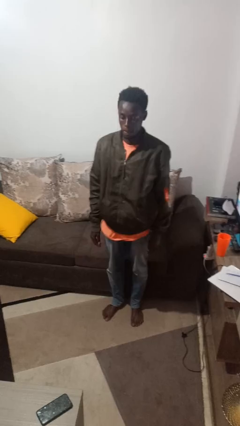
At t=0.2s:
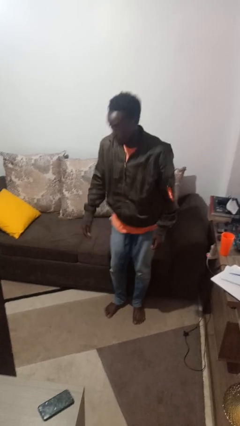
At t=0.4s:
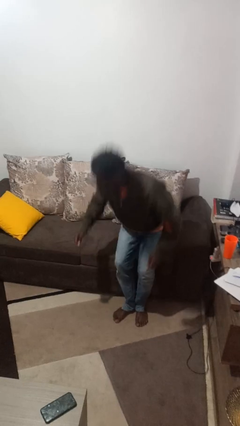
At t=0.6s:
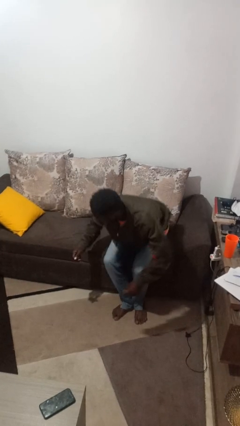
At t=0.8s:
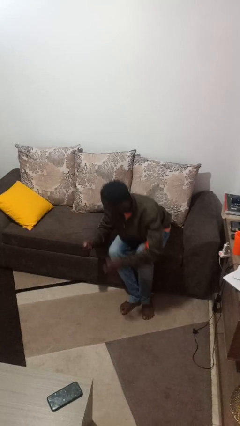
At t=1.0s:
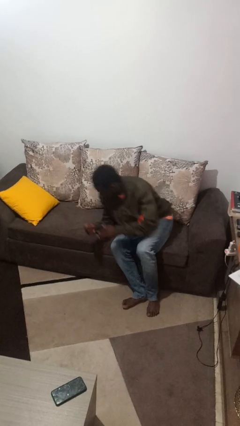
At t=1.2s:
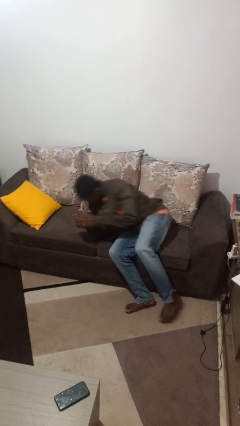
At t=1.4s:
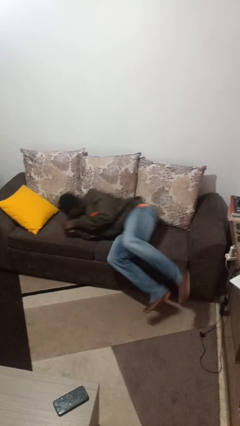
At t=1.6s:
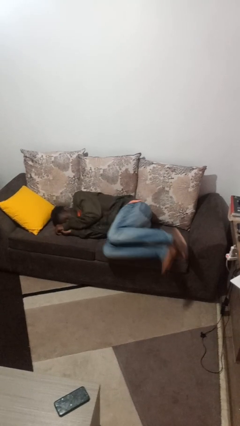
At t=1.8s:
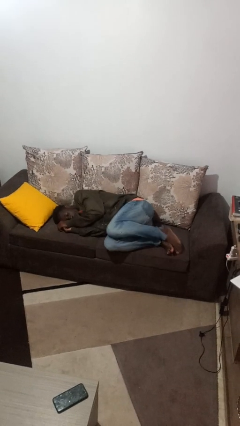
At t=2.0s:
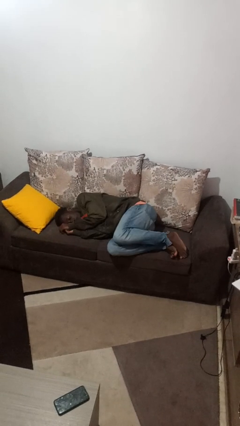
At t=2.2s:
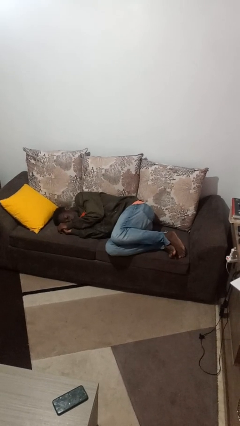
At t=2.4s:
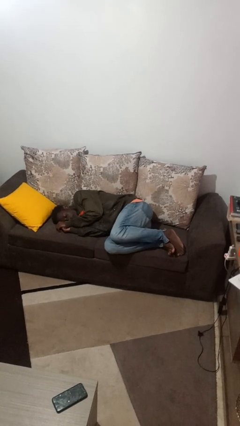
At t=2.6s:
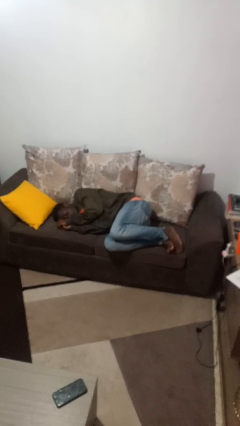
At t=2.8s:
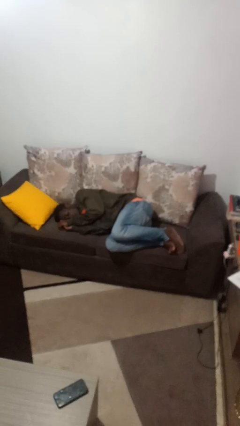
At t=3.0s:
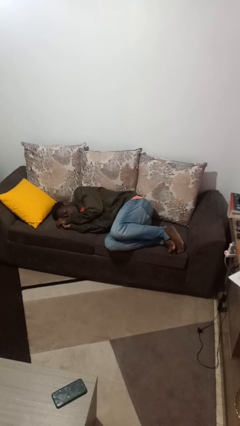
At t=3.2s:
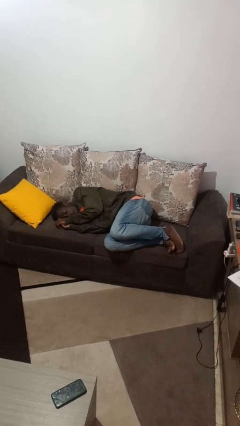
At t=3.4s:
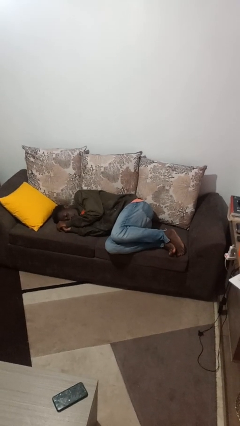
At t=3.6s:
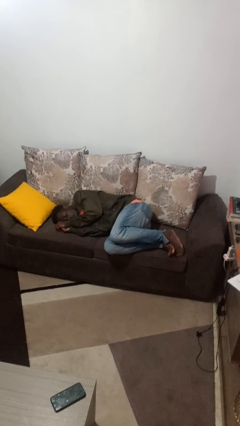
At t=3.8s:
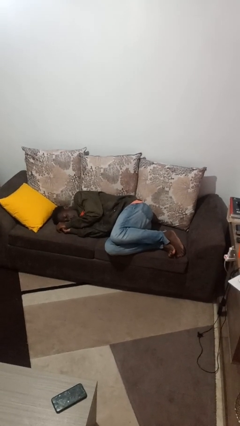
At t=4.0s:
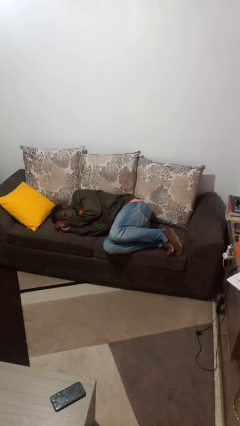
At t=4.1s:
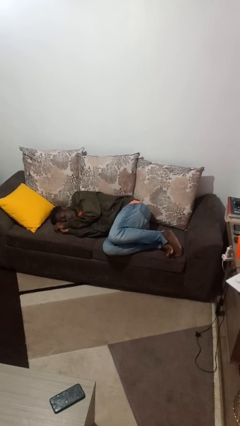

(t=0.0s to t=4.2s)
person lies down on couch

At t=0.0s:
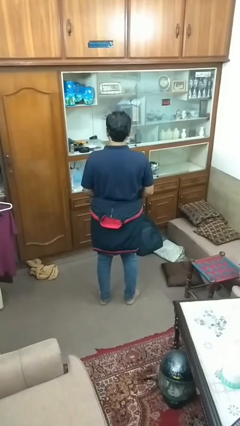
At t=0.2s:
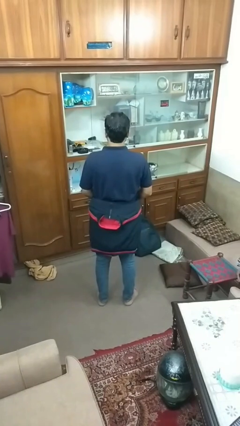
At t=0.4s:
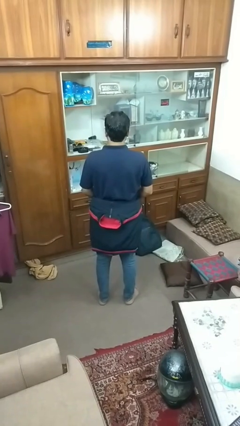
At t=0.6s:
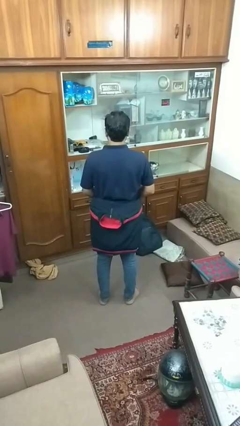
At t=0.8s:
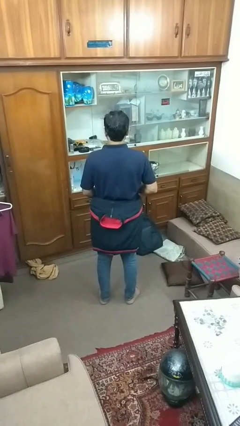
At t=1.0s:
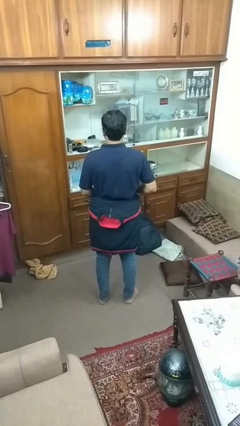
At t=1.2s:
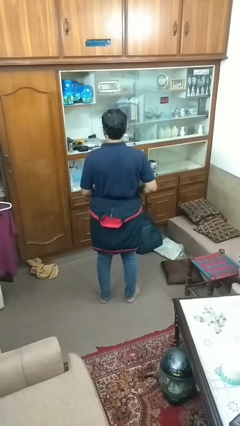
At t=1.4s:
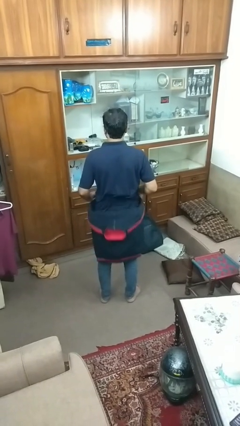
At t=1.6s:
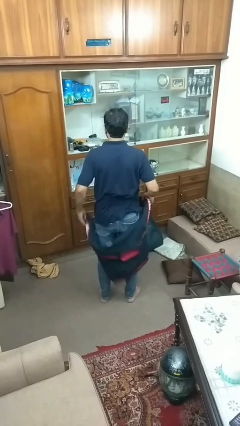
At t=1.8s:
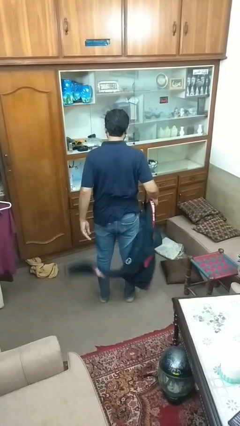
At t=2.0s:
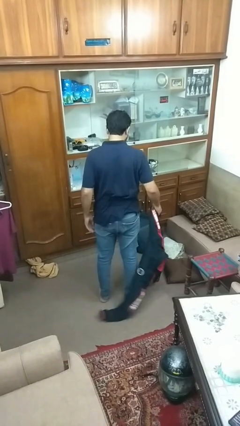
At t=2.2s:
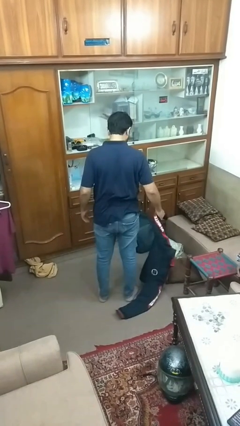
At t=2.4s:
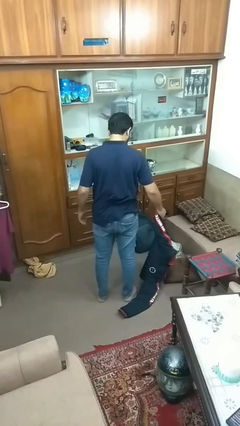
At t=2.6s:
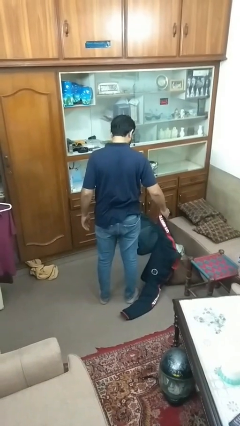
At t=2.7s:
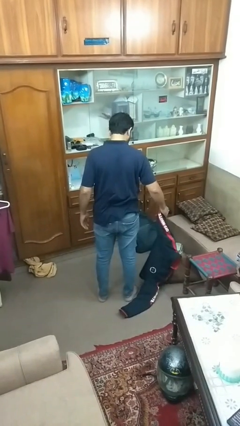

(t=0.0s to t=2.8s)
person unties jacket around waist

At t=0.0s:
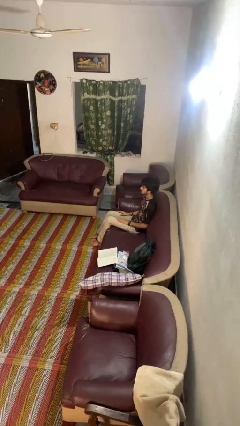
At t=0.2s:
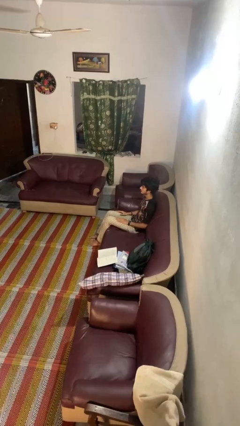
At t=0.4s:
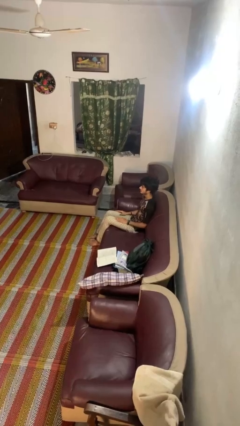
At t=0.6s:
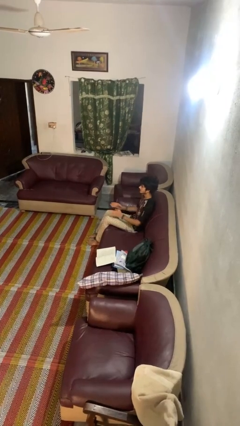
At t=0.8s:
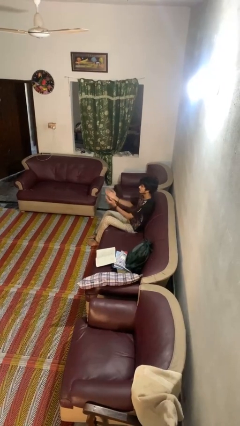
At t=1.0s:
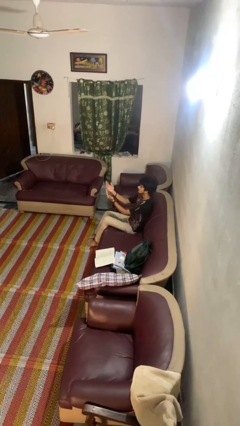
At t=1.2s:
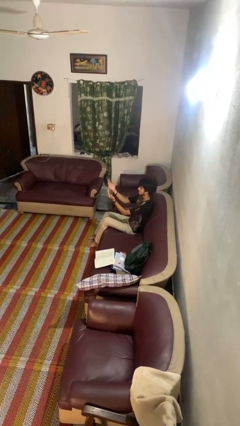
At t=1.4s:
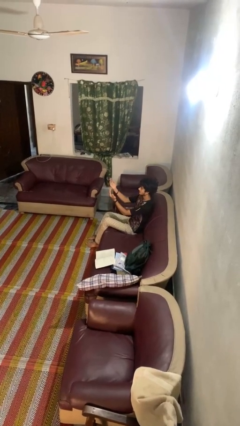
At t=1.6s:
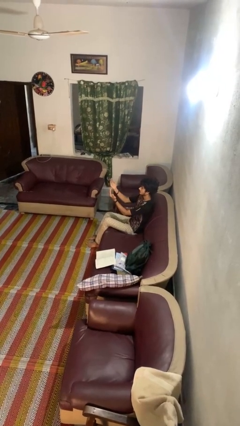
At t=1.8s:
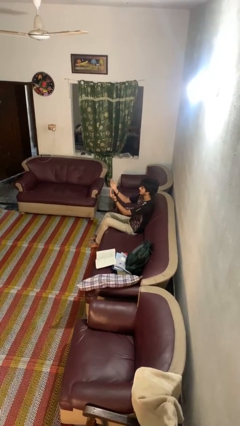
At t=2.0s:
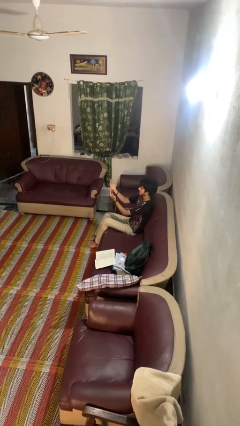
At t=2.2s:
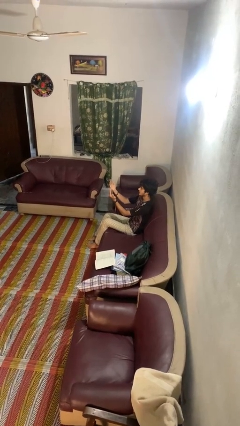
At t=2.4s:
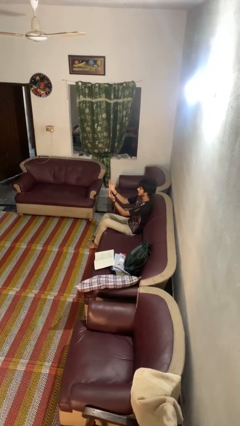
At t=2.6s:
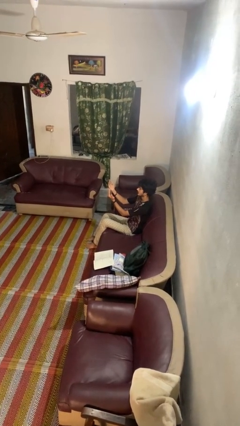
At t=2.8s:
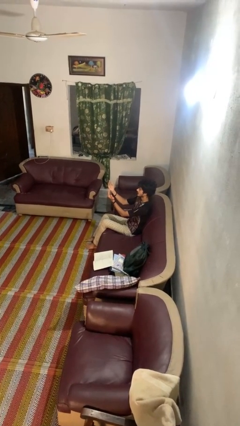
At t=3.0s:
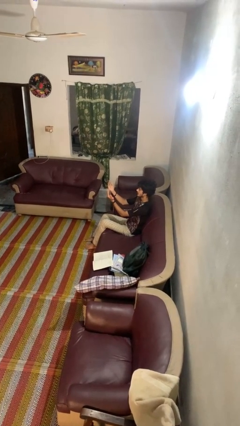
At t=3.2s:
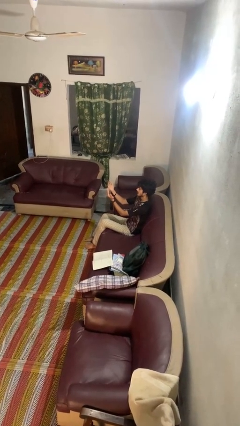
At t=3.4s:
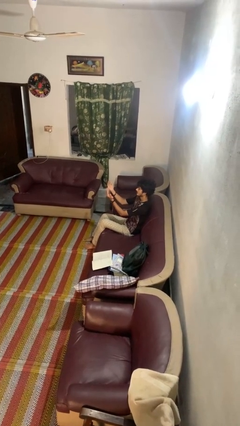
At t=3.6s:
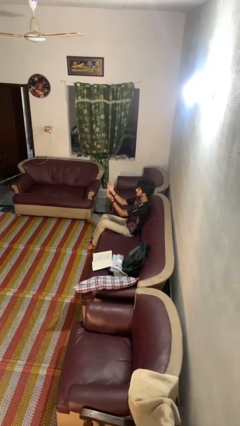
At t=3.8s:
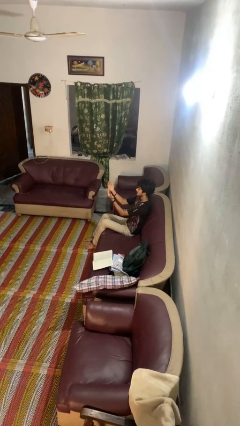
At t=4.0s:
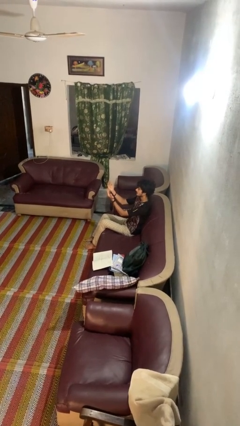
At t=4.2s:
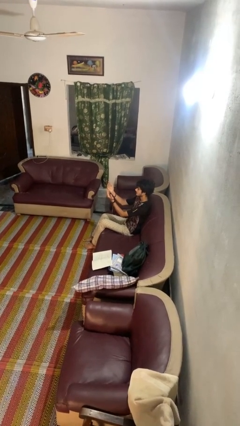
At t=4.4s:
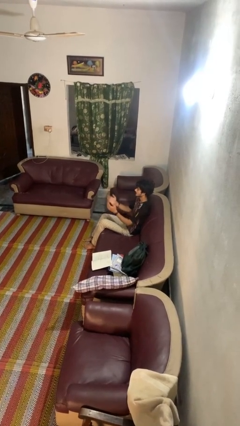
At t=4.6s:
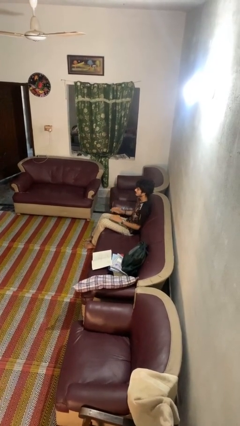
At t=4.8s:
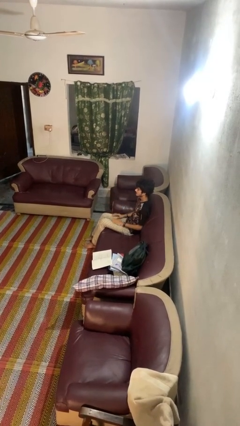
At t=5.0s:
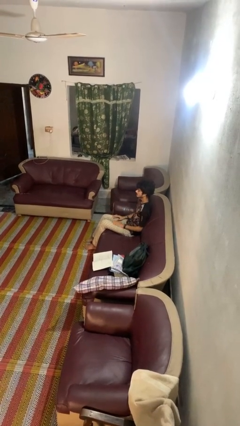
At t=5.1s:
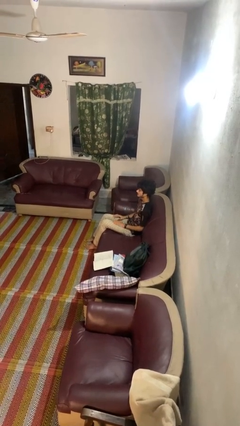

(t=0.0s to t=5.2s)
person prays

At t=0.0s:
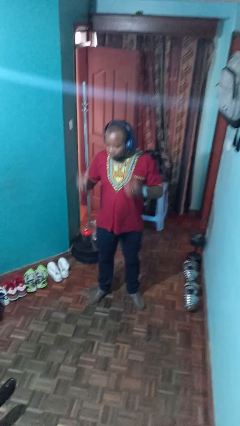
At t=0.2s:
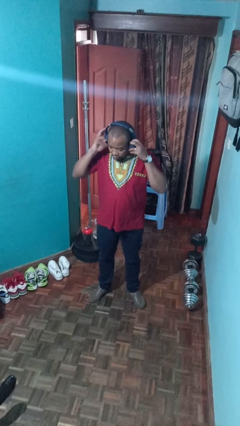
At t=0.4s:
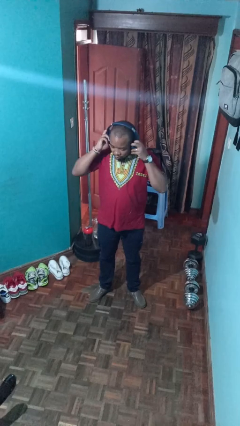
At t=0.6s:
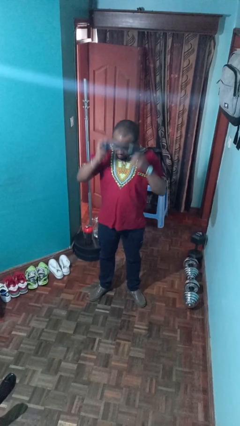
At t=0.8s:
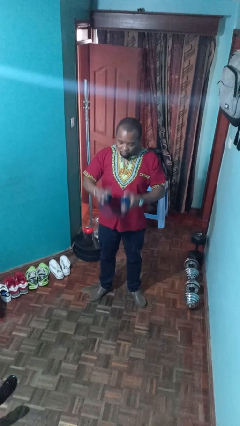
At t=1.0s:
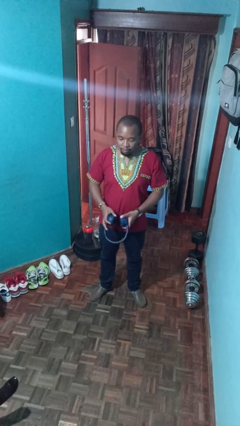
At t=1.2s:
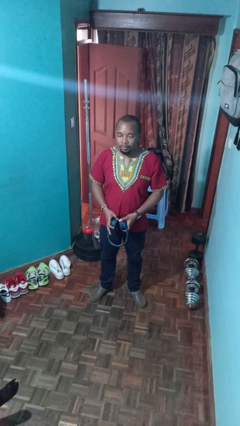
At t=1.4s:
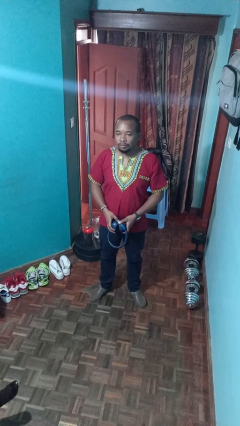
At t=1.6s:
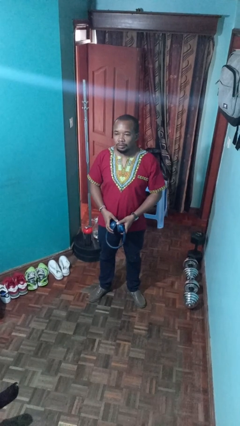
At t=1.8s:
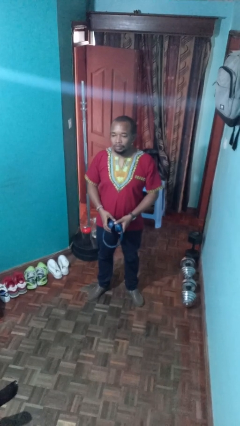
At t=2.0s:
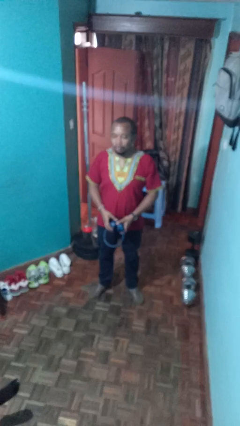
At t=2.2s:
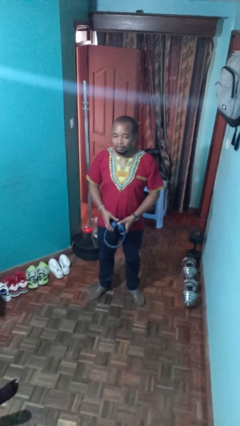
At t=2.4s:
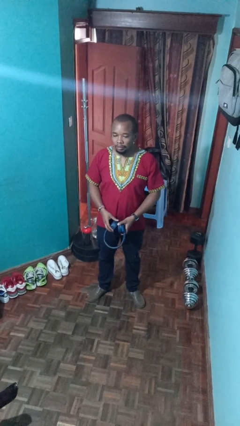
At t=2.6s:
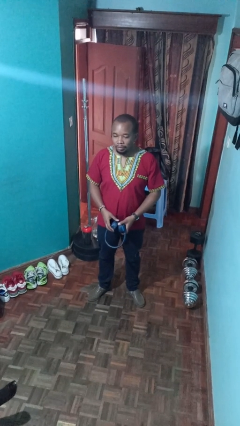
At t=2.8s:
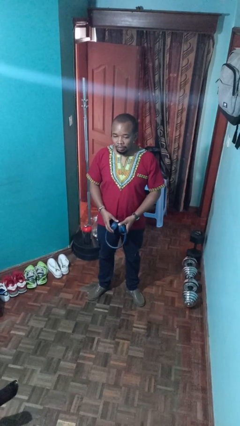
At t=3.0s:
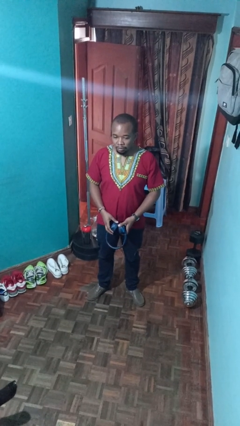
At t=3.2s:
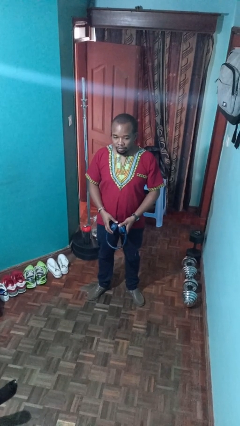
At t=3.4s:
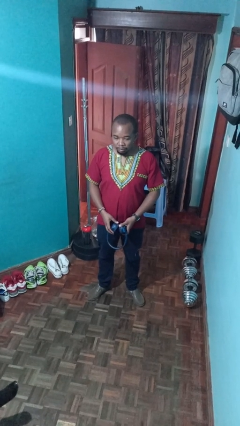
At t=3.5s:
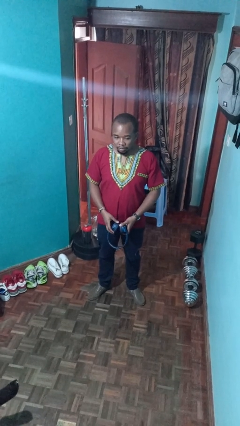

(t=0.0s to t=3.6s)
person takes off headphones

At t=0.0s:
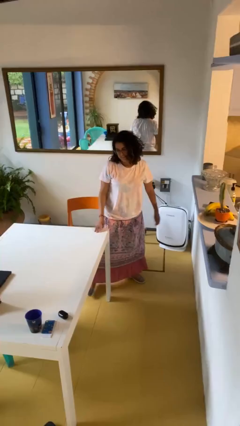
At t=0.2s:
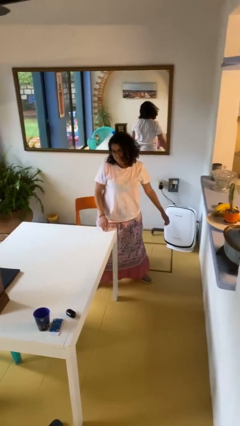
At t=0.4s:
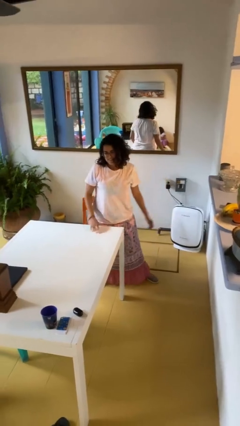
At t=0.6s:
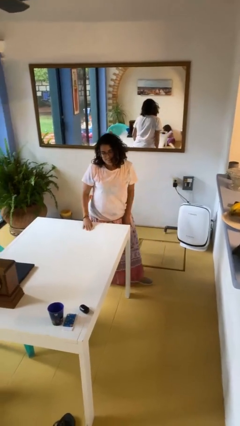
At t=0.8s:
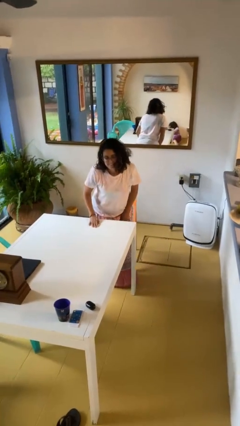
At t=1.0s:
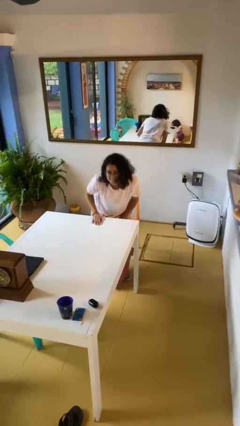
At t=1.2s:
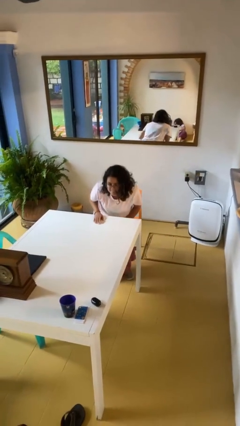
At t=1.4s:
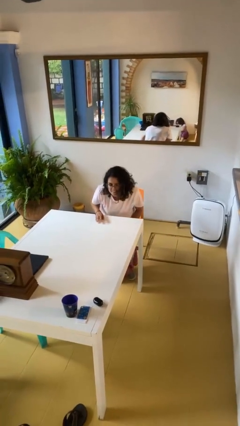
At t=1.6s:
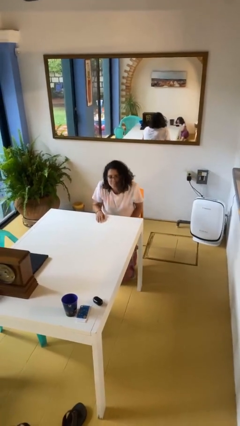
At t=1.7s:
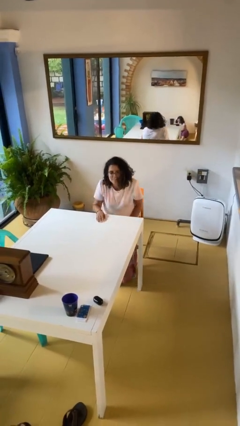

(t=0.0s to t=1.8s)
person sits down
